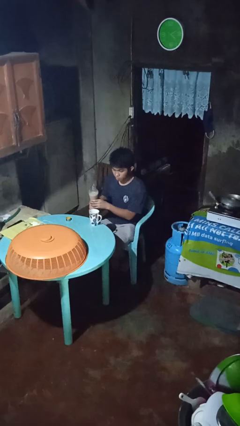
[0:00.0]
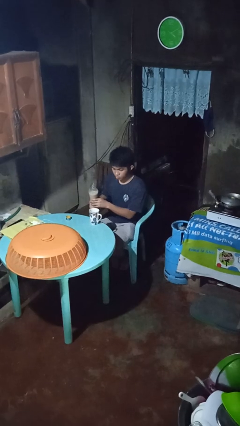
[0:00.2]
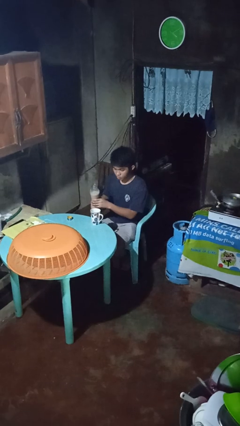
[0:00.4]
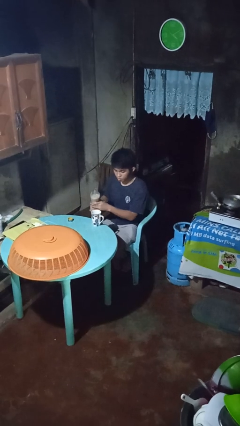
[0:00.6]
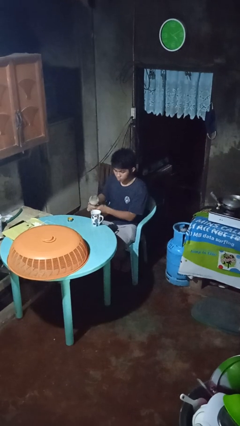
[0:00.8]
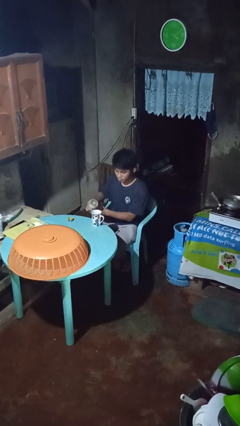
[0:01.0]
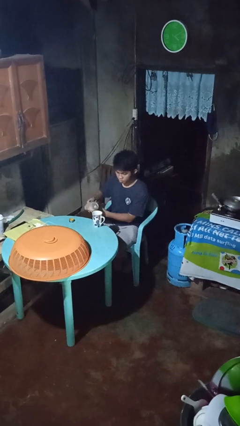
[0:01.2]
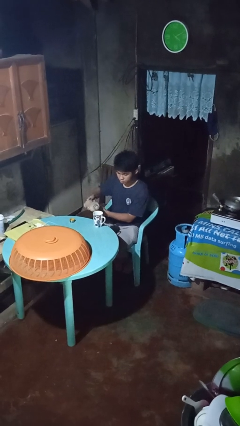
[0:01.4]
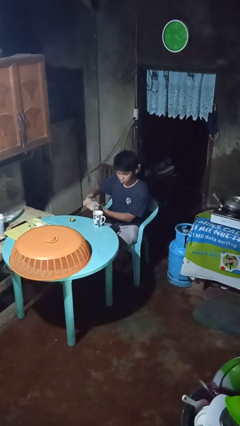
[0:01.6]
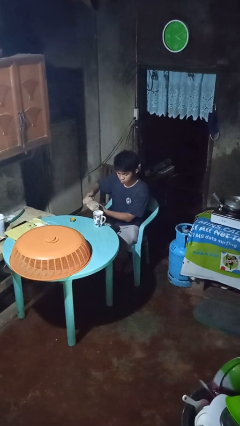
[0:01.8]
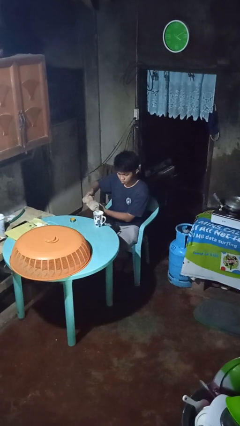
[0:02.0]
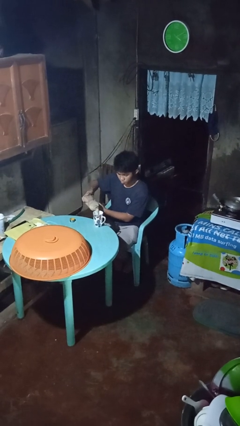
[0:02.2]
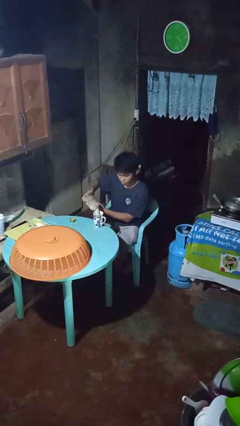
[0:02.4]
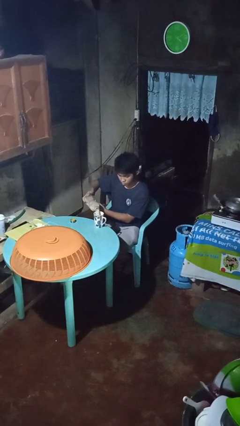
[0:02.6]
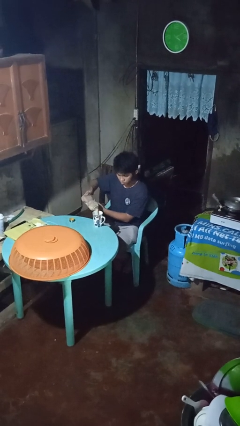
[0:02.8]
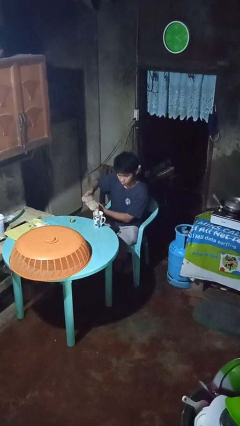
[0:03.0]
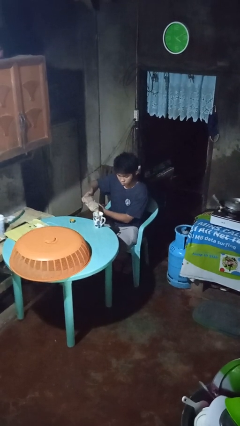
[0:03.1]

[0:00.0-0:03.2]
person pours coffee into mug

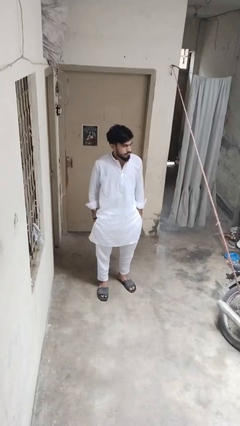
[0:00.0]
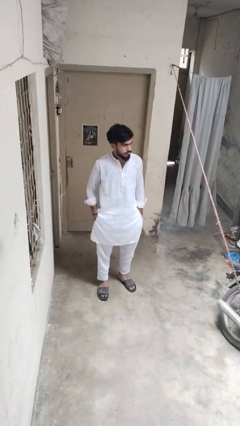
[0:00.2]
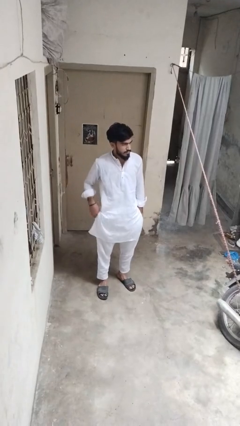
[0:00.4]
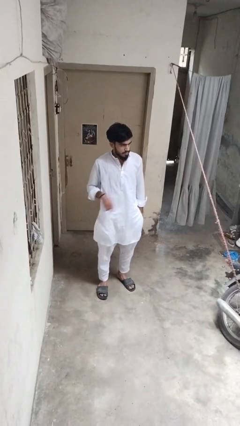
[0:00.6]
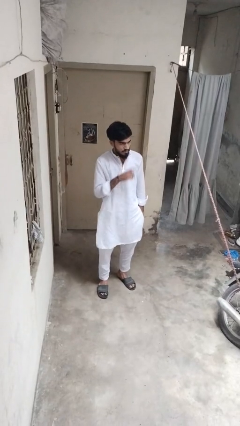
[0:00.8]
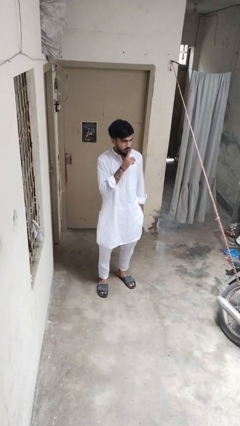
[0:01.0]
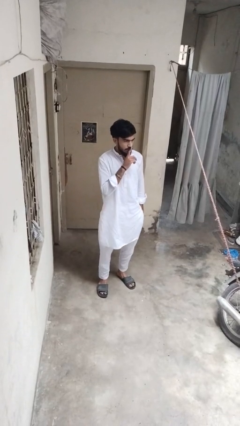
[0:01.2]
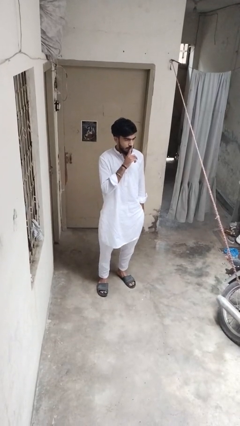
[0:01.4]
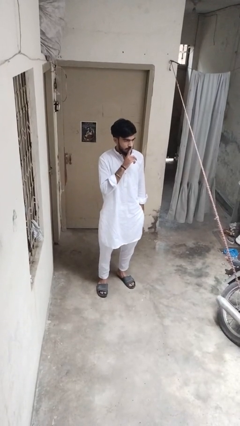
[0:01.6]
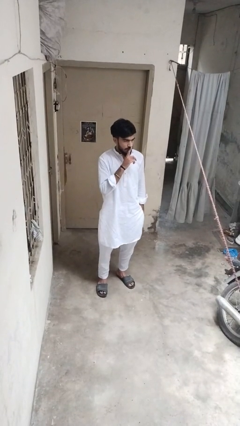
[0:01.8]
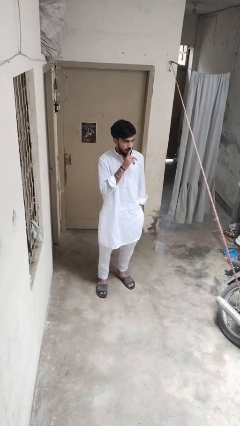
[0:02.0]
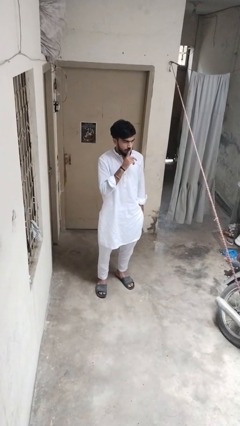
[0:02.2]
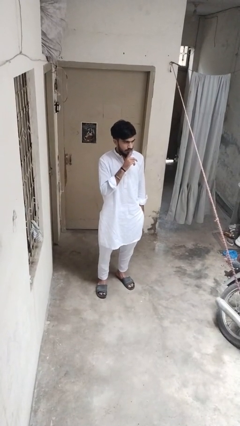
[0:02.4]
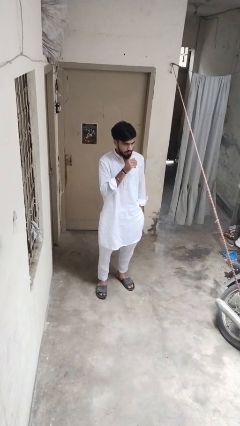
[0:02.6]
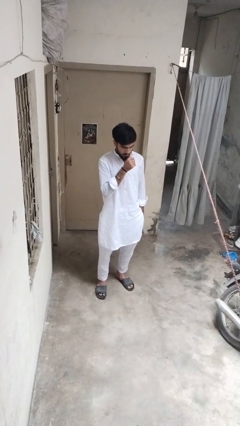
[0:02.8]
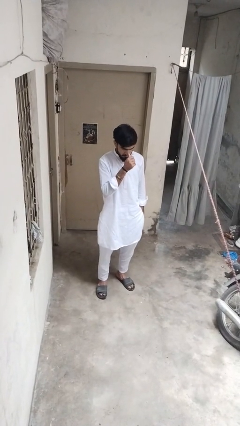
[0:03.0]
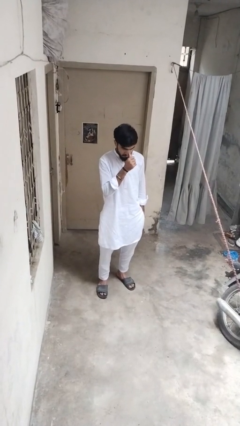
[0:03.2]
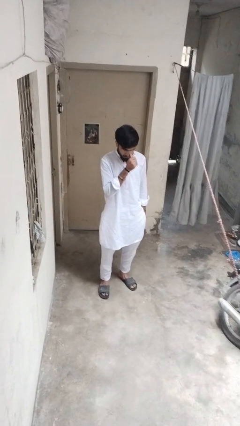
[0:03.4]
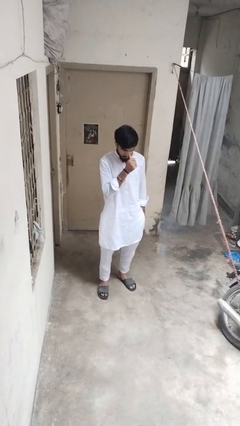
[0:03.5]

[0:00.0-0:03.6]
person gestures be quiet

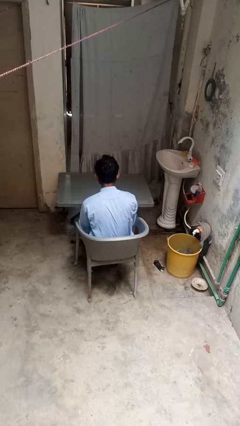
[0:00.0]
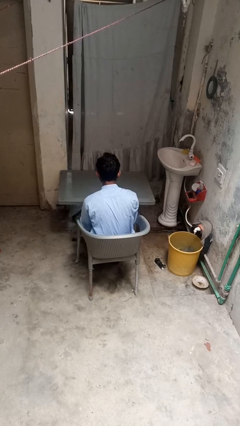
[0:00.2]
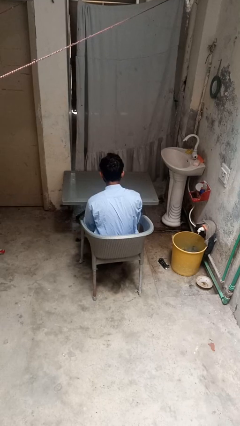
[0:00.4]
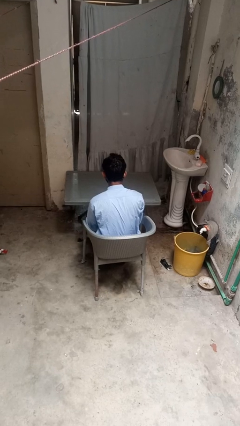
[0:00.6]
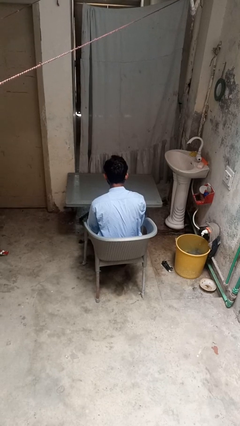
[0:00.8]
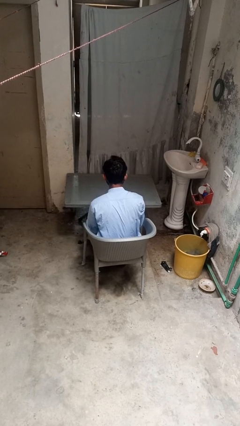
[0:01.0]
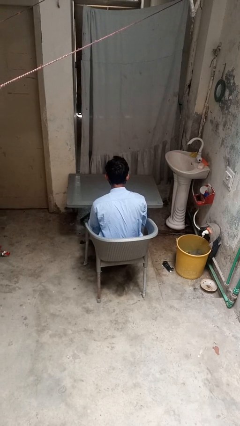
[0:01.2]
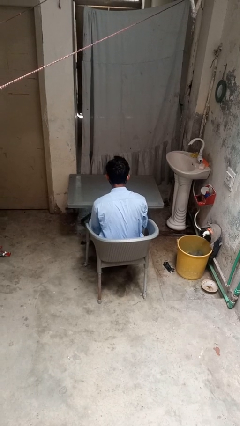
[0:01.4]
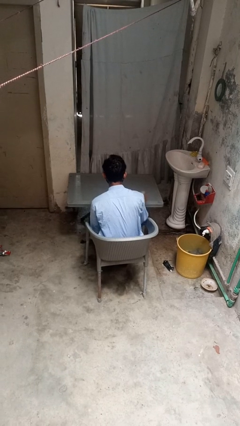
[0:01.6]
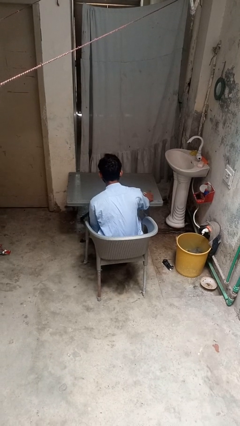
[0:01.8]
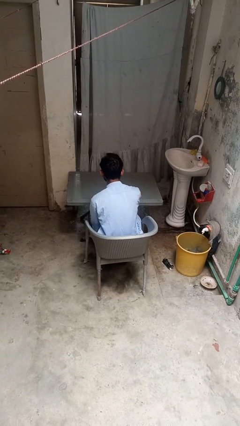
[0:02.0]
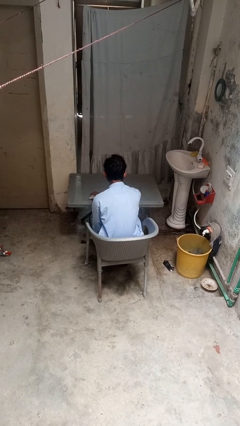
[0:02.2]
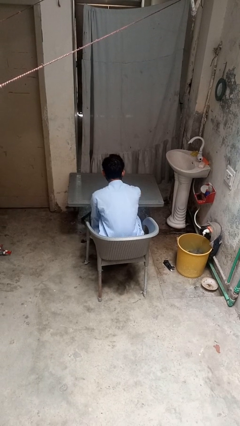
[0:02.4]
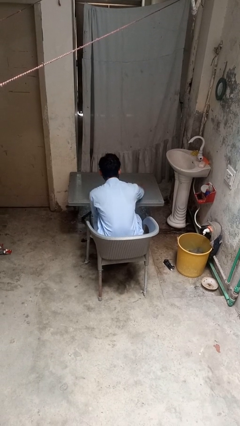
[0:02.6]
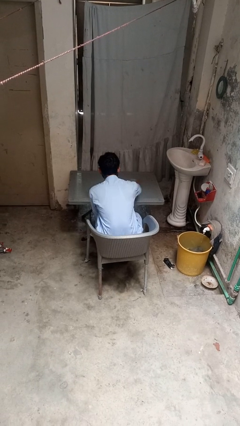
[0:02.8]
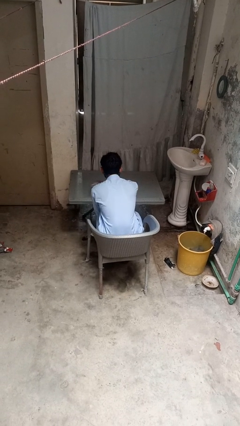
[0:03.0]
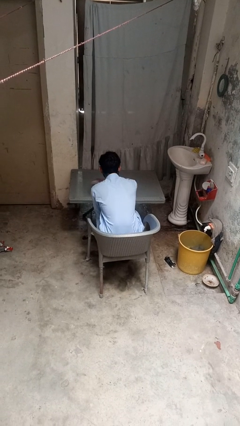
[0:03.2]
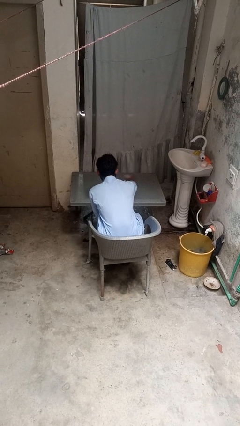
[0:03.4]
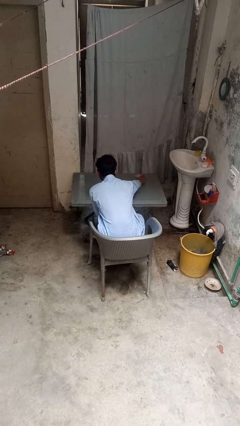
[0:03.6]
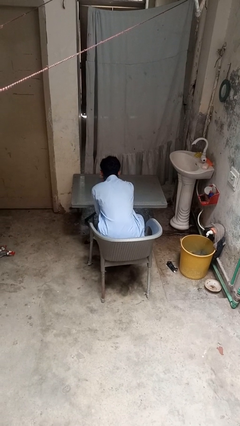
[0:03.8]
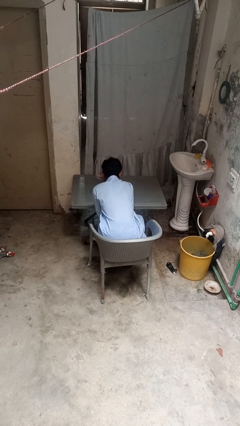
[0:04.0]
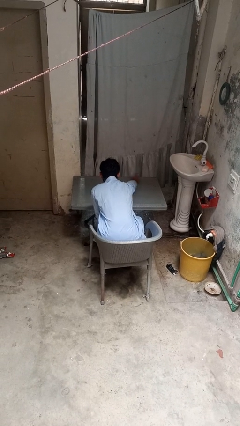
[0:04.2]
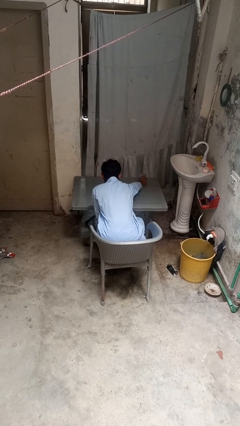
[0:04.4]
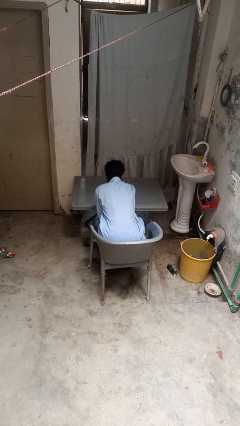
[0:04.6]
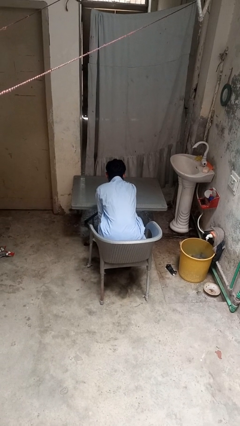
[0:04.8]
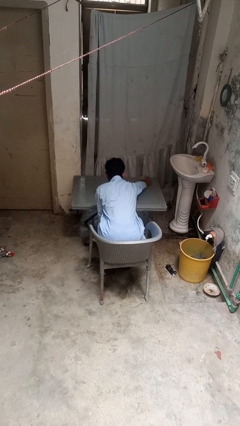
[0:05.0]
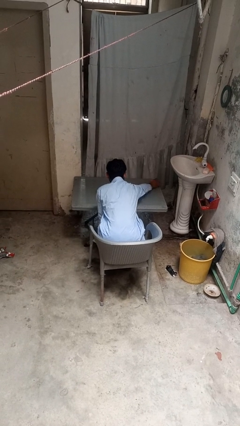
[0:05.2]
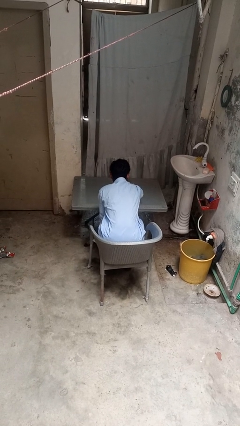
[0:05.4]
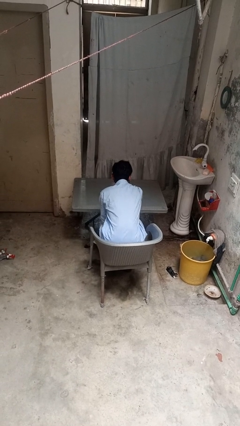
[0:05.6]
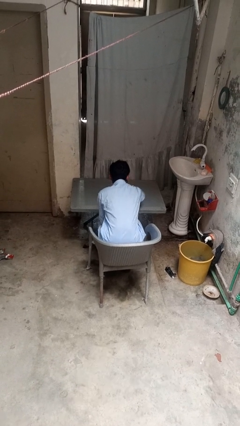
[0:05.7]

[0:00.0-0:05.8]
person cleans table with rag

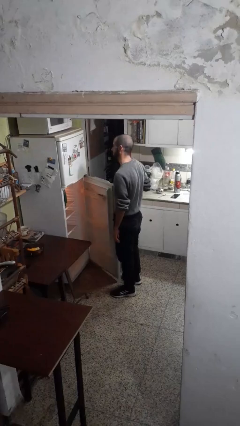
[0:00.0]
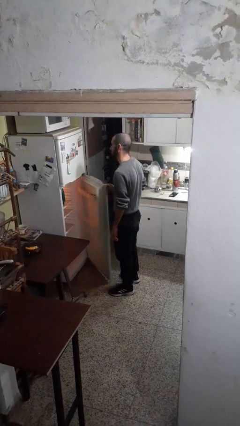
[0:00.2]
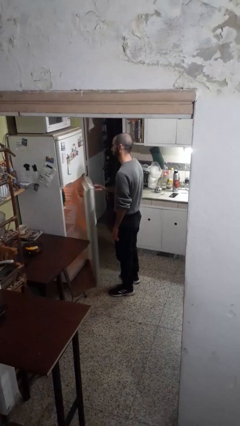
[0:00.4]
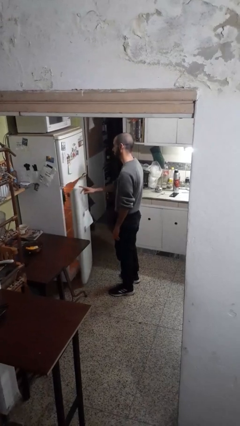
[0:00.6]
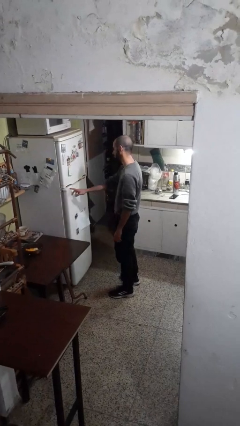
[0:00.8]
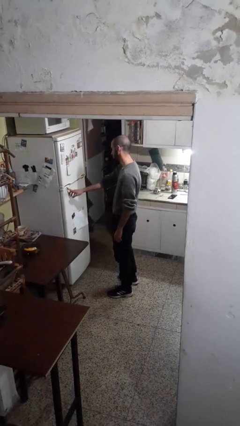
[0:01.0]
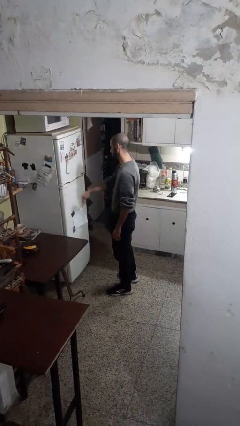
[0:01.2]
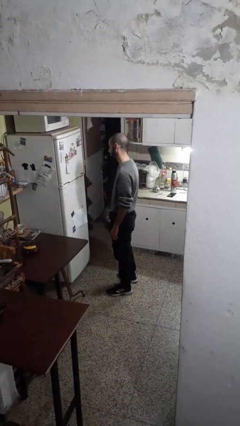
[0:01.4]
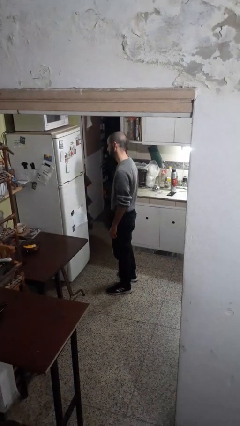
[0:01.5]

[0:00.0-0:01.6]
person closes refrigerator

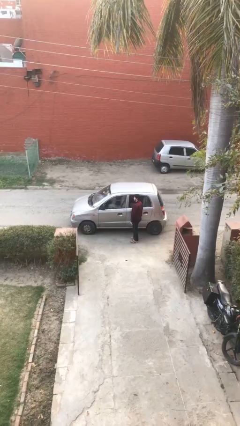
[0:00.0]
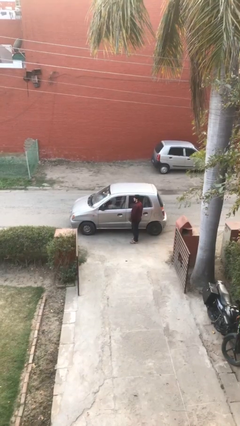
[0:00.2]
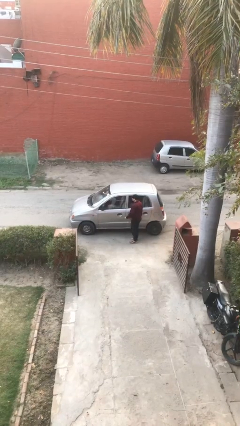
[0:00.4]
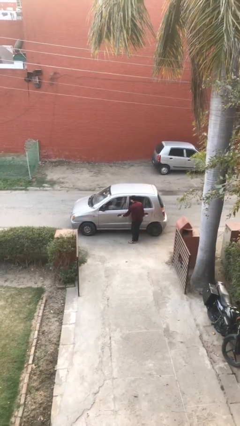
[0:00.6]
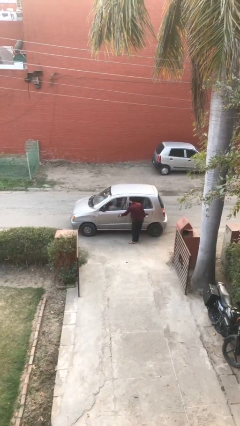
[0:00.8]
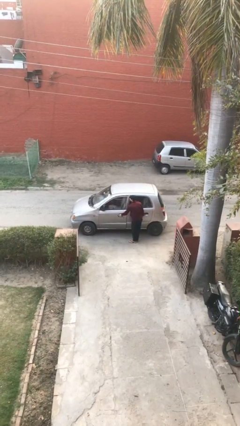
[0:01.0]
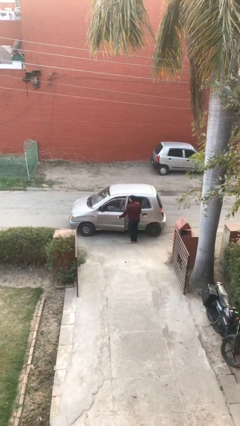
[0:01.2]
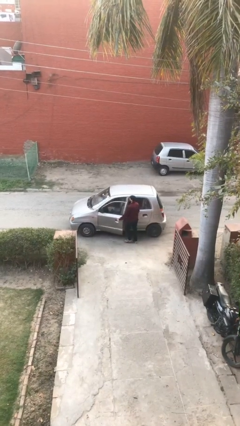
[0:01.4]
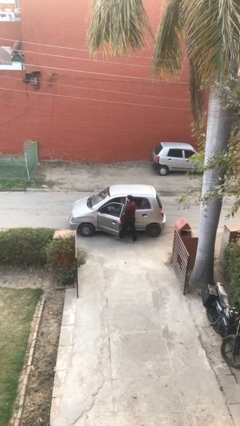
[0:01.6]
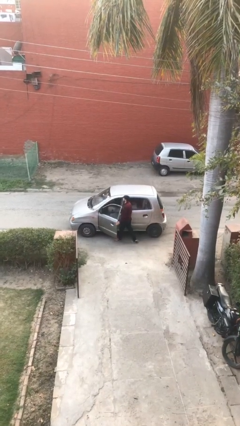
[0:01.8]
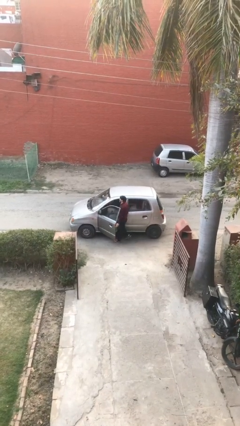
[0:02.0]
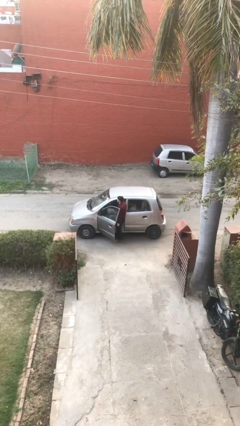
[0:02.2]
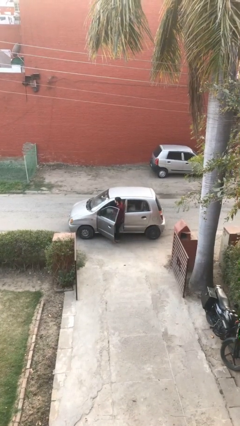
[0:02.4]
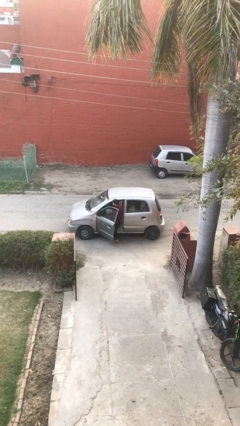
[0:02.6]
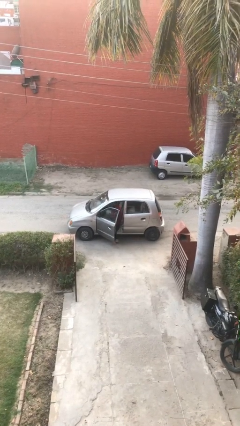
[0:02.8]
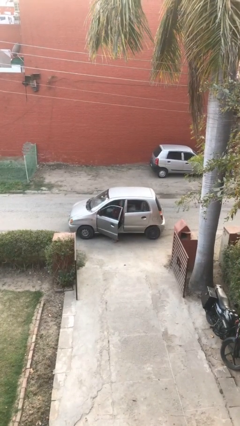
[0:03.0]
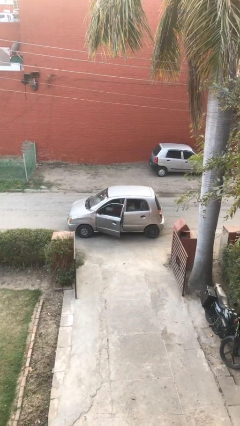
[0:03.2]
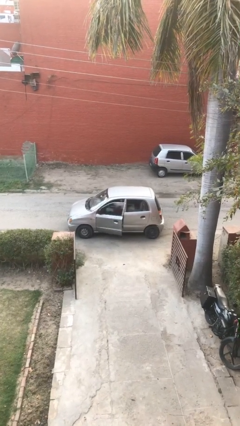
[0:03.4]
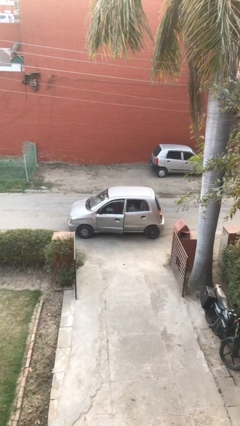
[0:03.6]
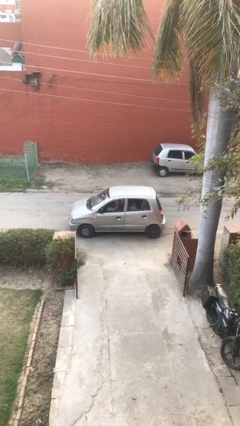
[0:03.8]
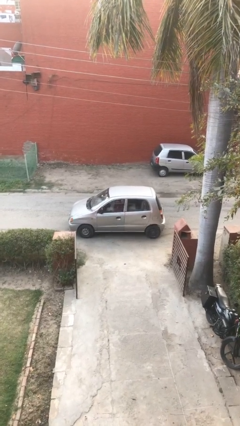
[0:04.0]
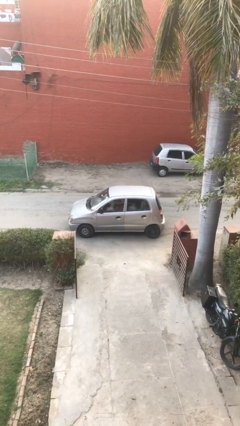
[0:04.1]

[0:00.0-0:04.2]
car picks up person
